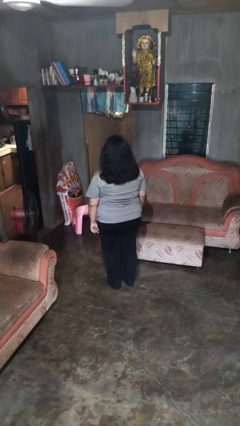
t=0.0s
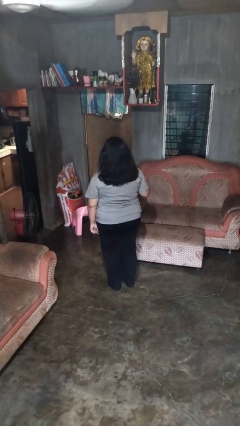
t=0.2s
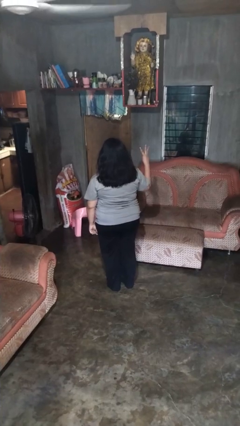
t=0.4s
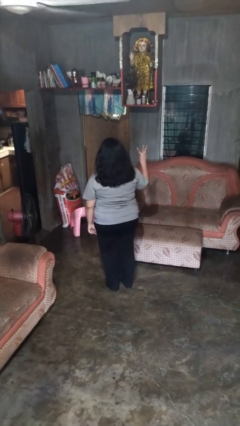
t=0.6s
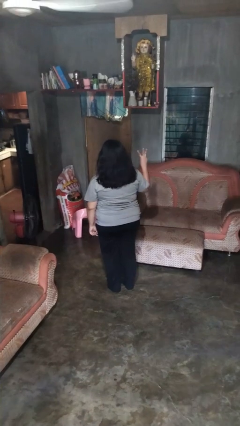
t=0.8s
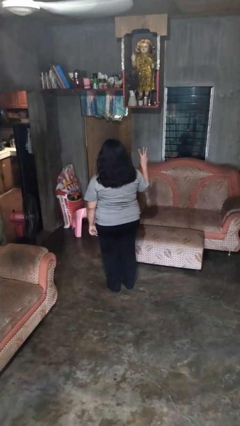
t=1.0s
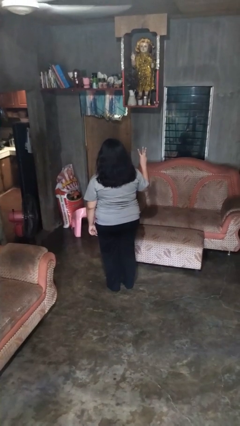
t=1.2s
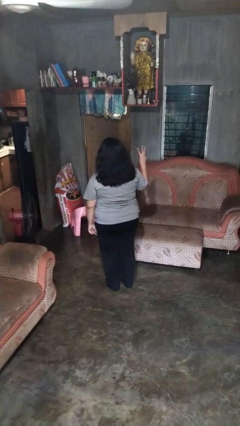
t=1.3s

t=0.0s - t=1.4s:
person gestures number three

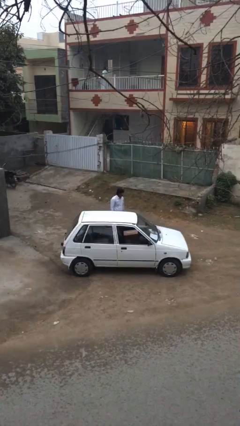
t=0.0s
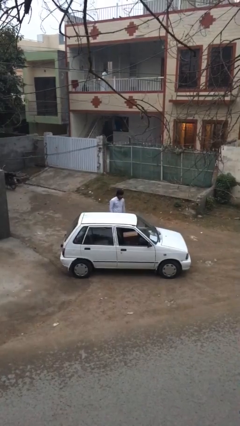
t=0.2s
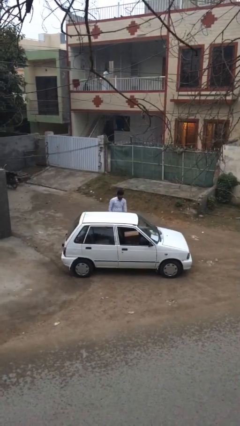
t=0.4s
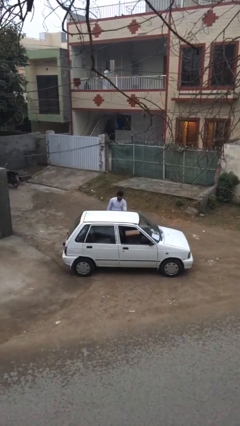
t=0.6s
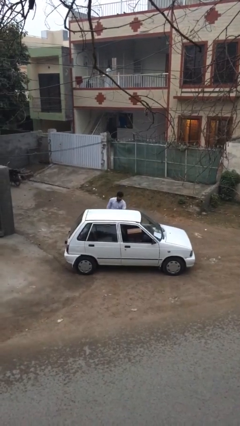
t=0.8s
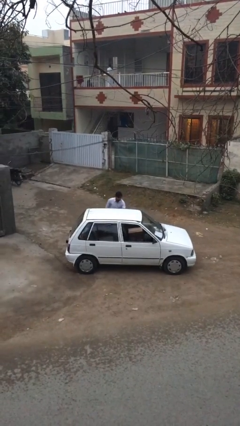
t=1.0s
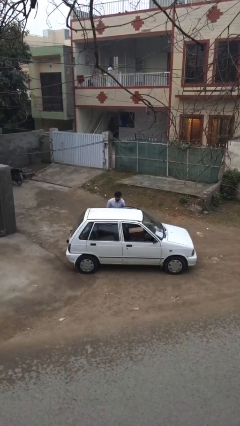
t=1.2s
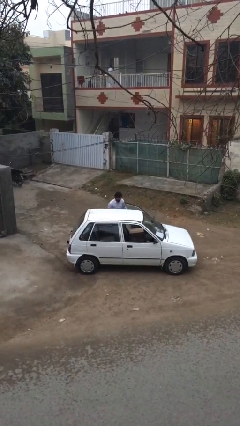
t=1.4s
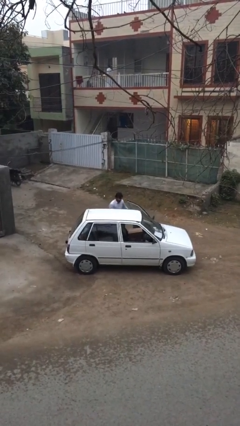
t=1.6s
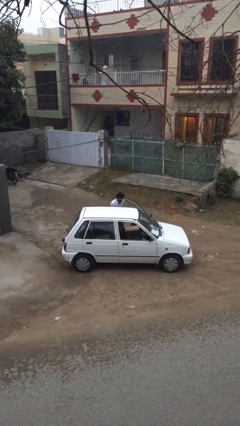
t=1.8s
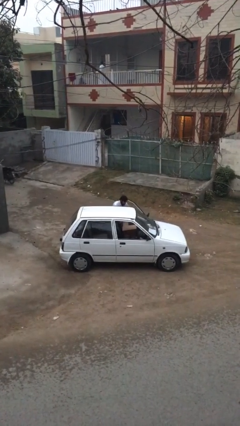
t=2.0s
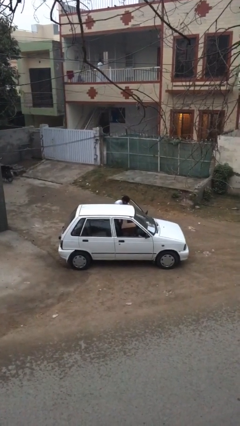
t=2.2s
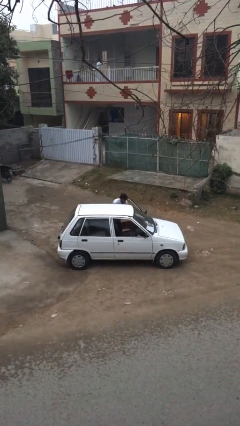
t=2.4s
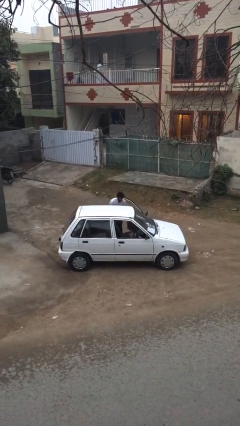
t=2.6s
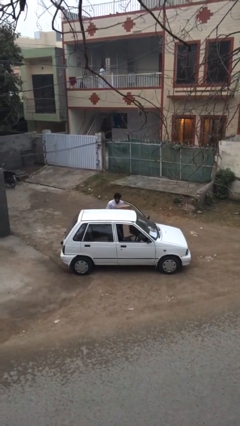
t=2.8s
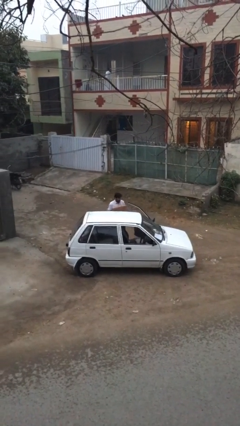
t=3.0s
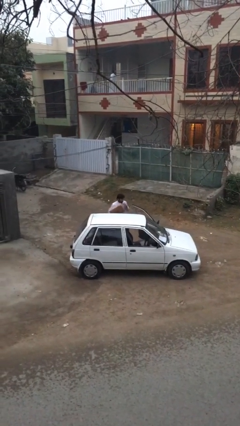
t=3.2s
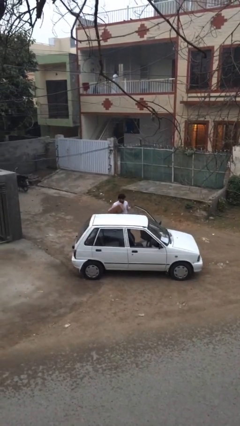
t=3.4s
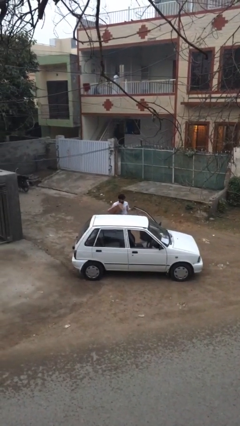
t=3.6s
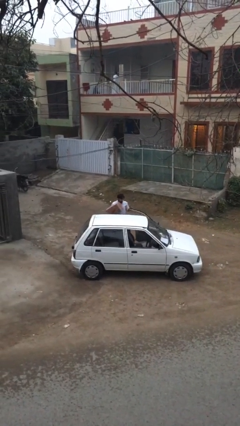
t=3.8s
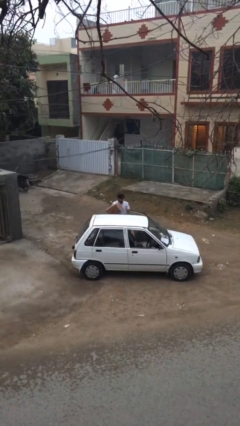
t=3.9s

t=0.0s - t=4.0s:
person unloads car

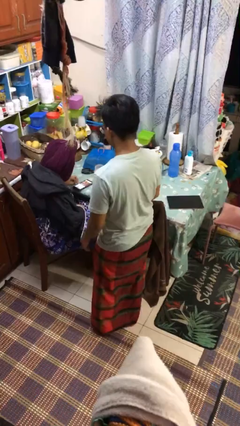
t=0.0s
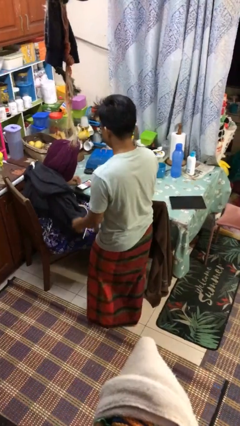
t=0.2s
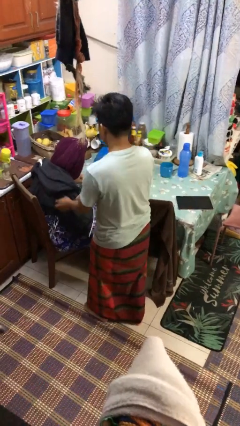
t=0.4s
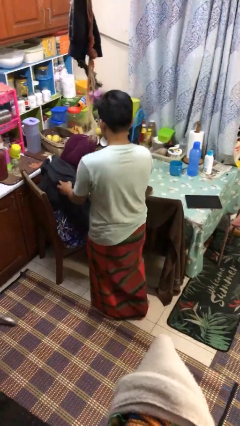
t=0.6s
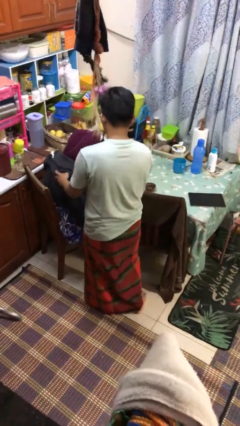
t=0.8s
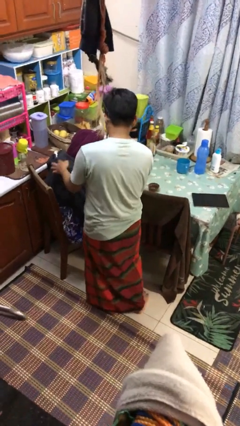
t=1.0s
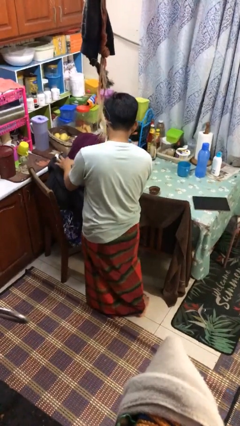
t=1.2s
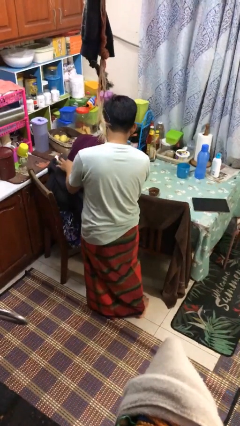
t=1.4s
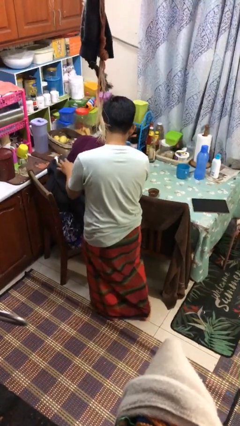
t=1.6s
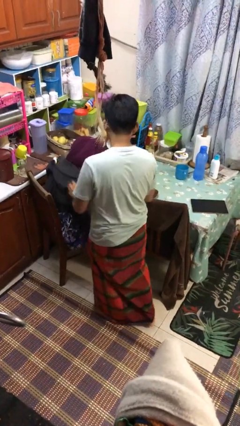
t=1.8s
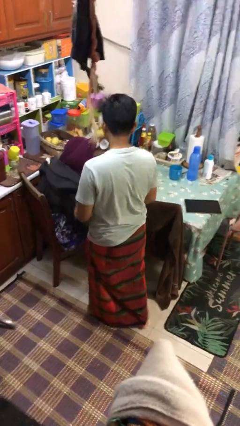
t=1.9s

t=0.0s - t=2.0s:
person tickles person

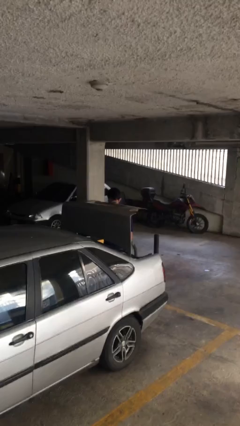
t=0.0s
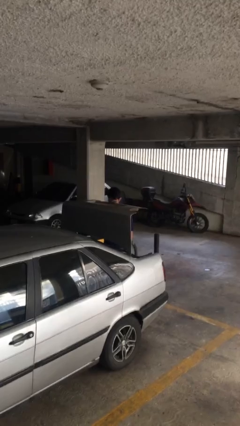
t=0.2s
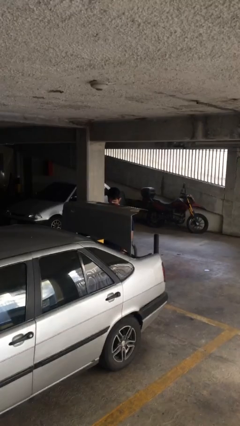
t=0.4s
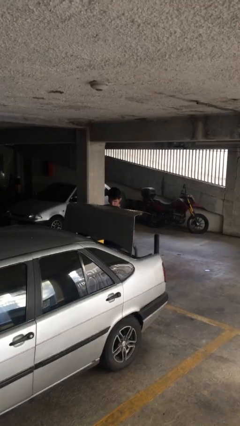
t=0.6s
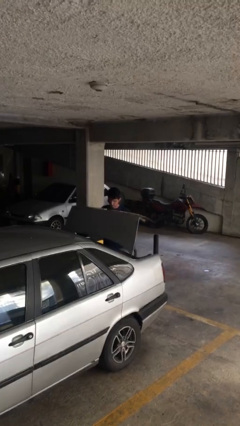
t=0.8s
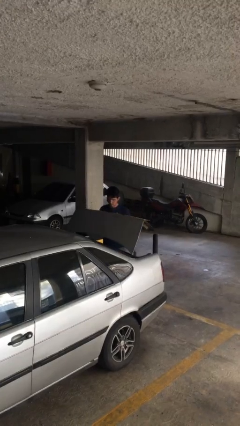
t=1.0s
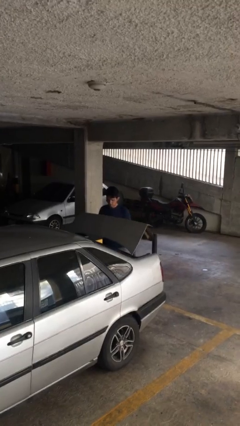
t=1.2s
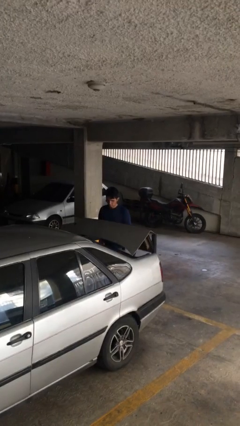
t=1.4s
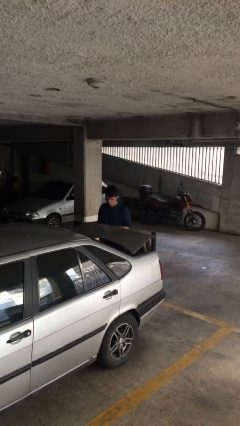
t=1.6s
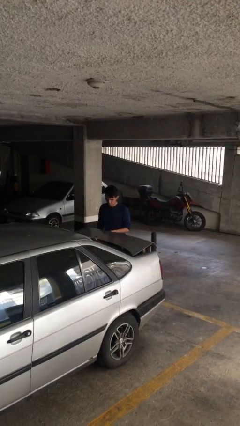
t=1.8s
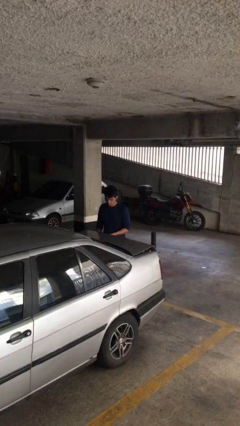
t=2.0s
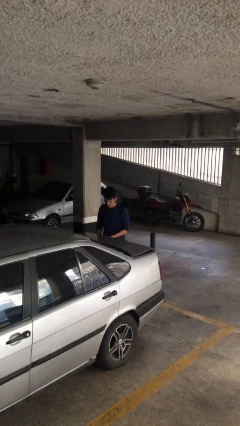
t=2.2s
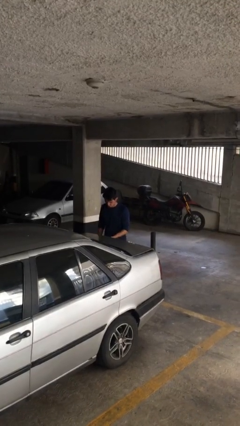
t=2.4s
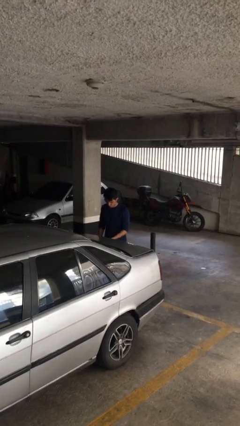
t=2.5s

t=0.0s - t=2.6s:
person closes car trunk

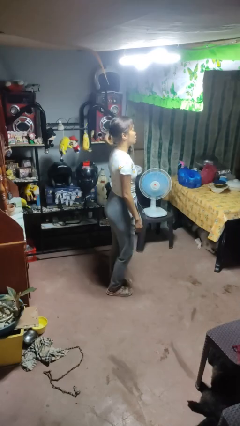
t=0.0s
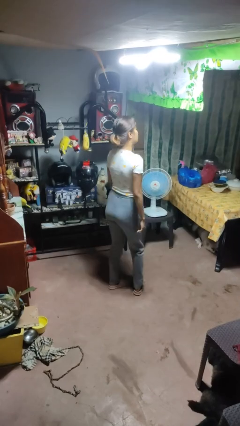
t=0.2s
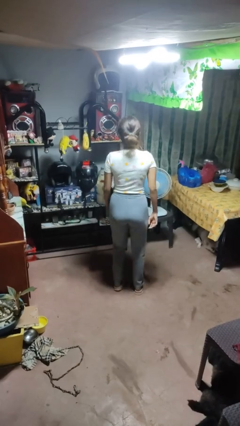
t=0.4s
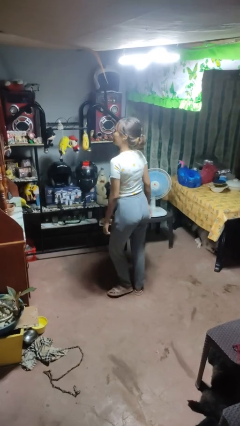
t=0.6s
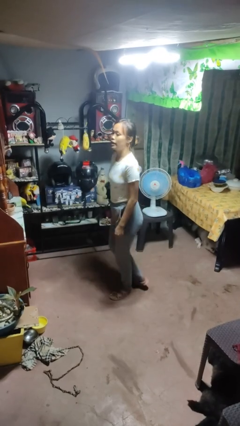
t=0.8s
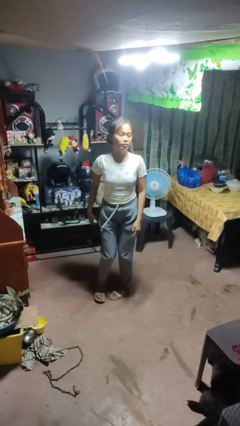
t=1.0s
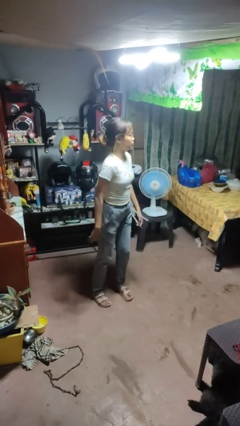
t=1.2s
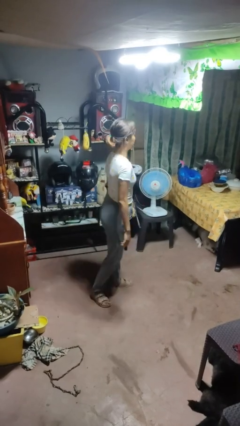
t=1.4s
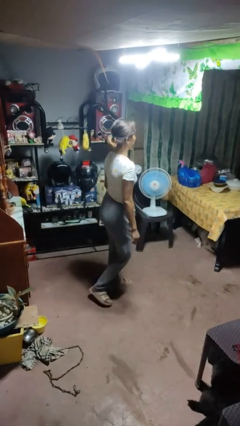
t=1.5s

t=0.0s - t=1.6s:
person twirls

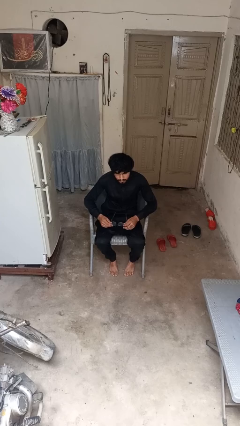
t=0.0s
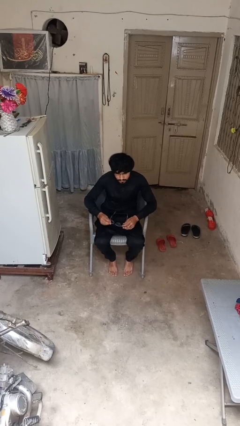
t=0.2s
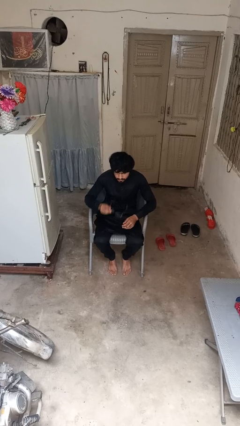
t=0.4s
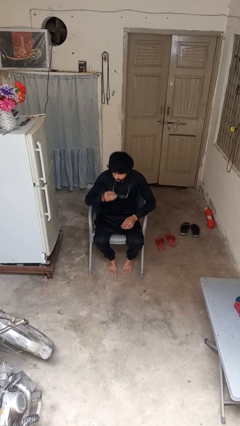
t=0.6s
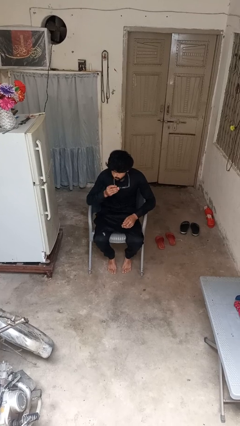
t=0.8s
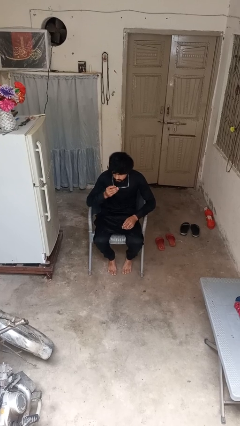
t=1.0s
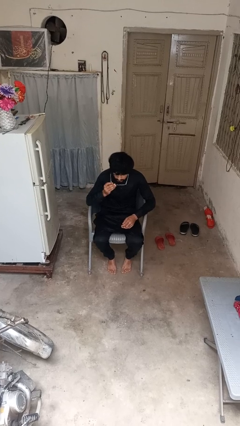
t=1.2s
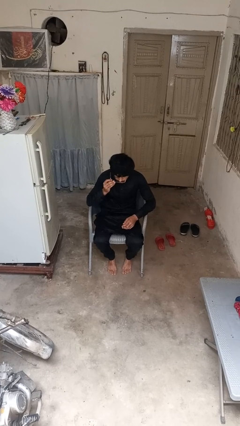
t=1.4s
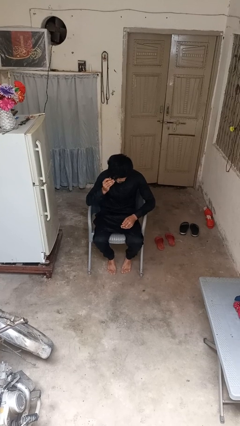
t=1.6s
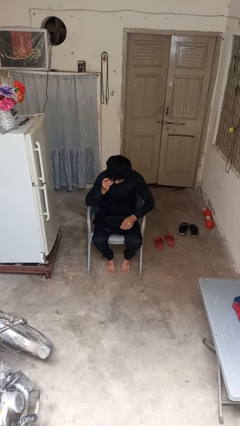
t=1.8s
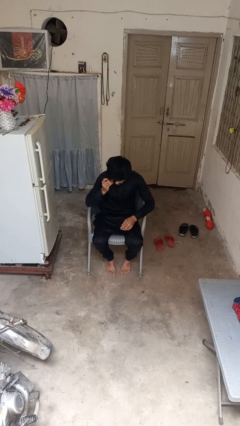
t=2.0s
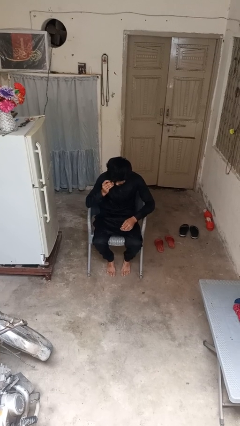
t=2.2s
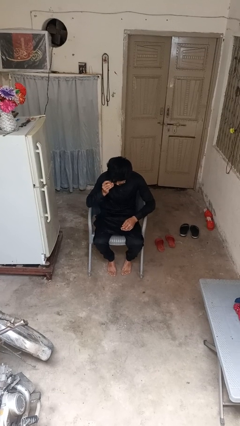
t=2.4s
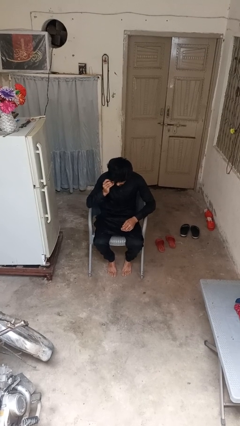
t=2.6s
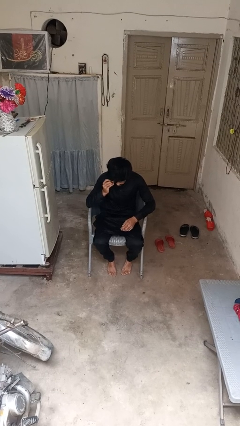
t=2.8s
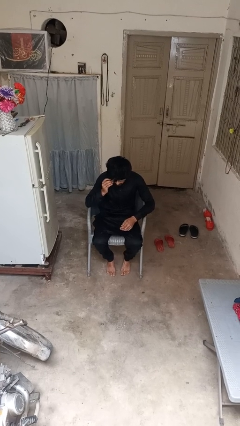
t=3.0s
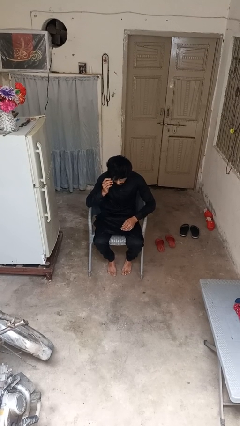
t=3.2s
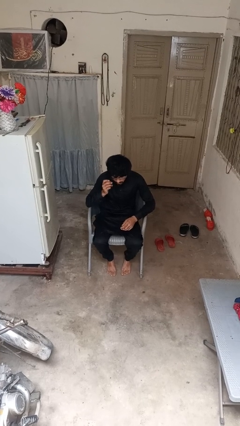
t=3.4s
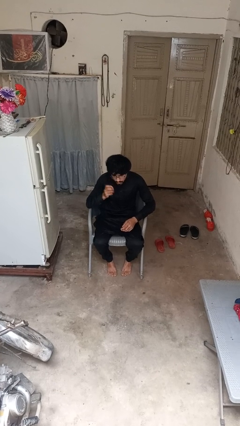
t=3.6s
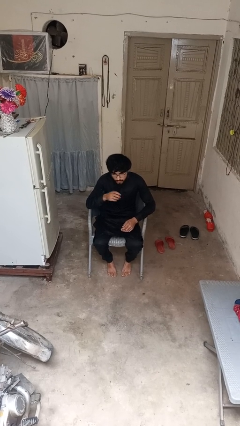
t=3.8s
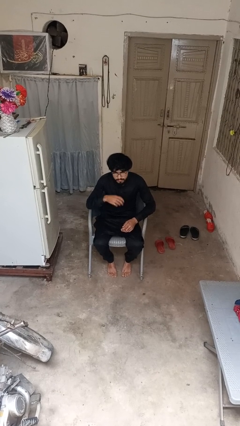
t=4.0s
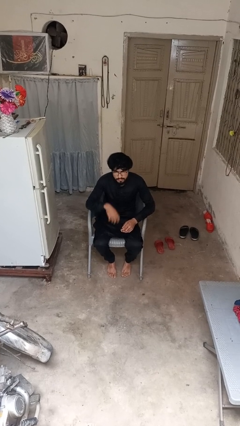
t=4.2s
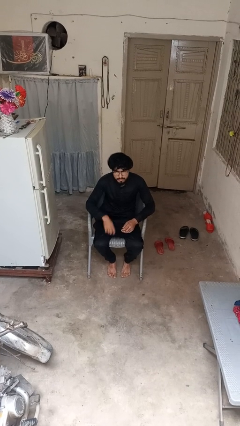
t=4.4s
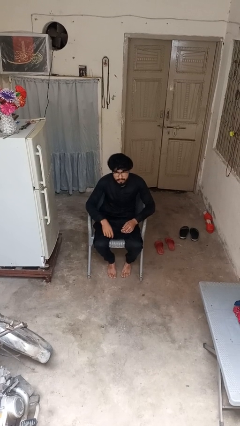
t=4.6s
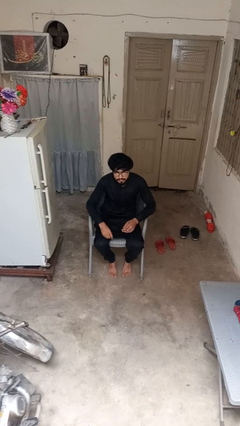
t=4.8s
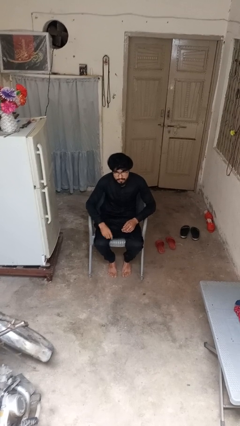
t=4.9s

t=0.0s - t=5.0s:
person puts on glasses

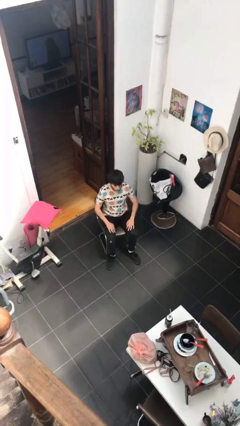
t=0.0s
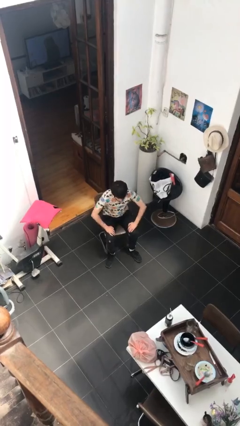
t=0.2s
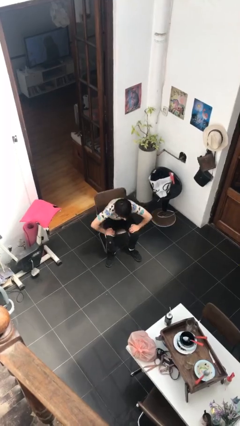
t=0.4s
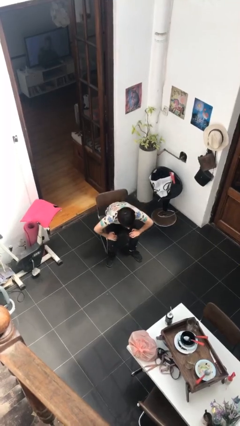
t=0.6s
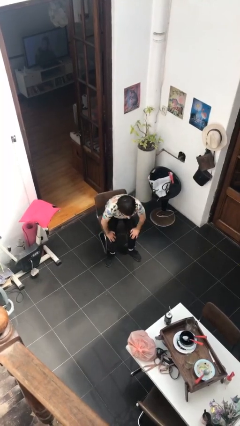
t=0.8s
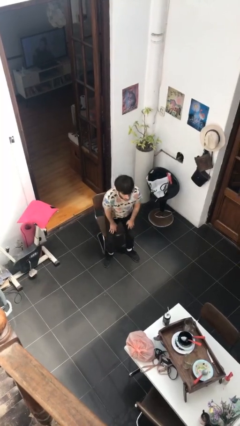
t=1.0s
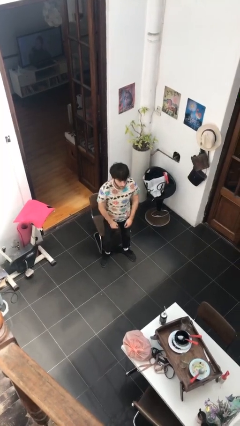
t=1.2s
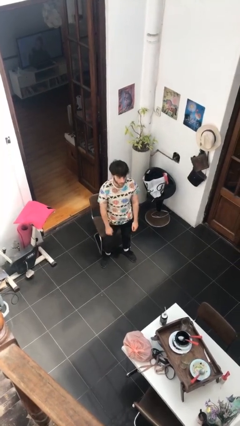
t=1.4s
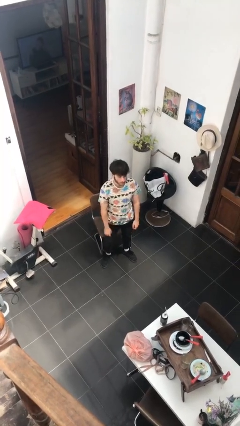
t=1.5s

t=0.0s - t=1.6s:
person stands up
